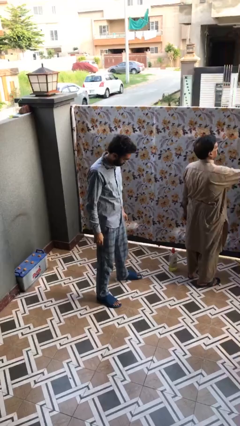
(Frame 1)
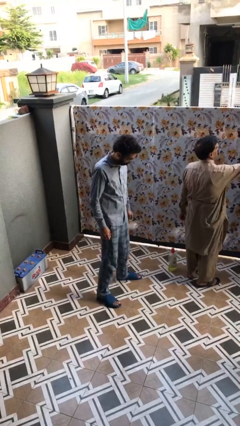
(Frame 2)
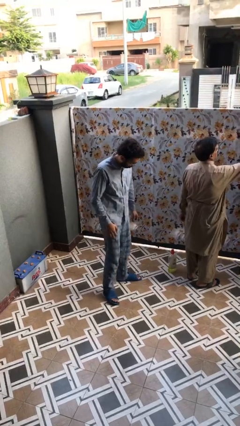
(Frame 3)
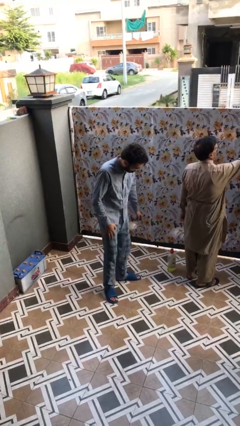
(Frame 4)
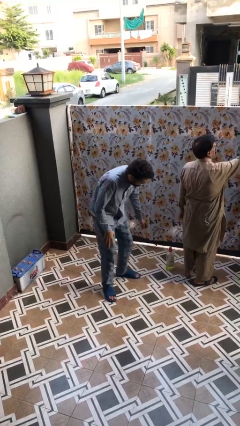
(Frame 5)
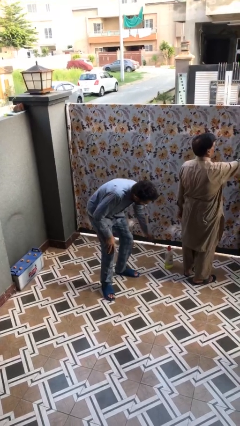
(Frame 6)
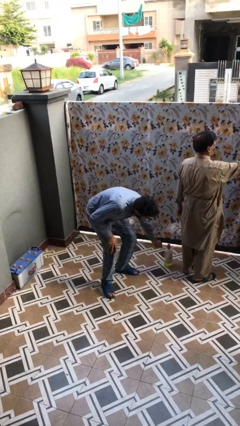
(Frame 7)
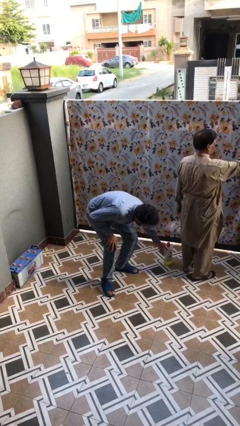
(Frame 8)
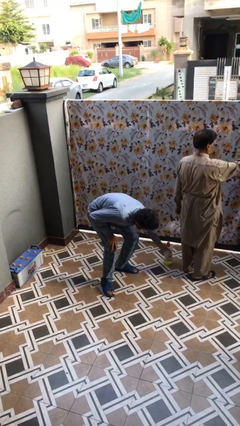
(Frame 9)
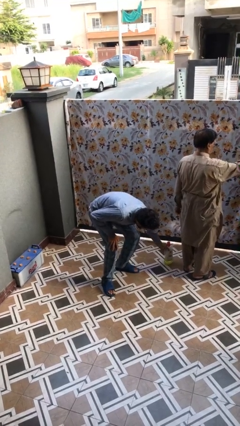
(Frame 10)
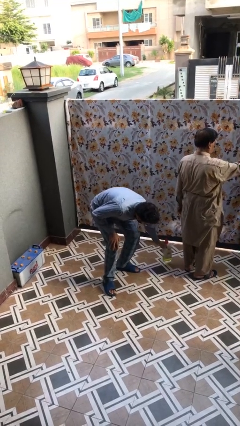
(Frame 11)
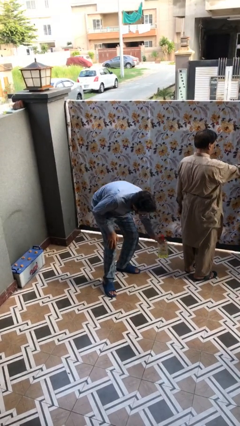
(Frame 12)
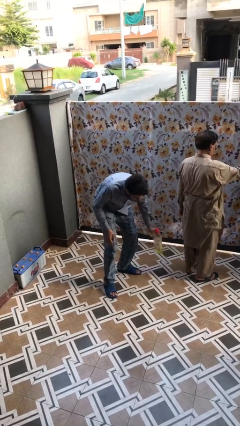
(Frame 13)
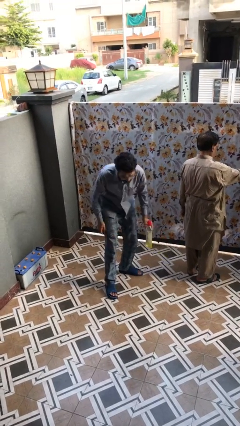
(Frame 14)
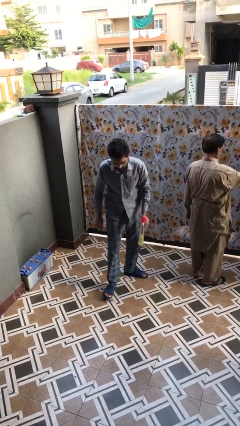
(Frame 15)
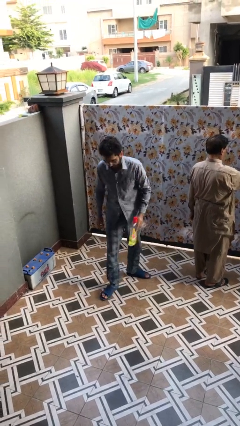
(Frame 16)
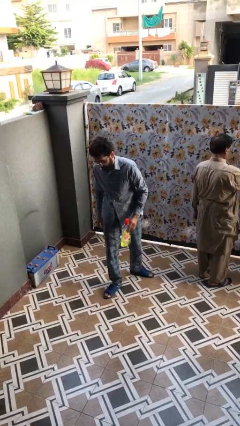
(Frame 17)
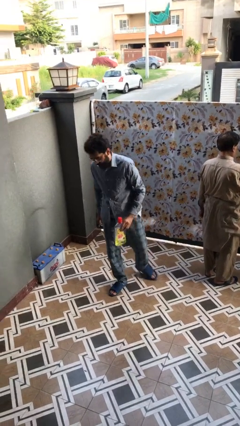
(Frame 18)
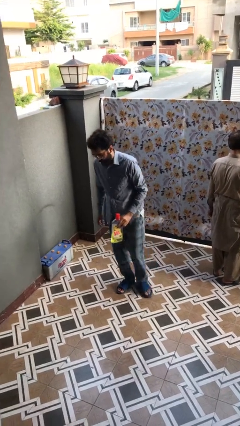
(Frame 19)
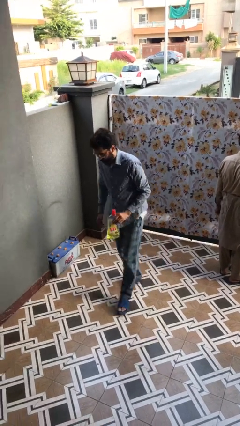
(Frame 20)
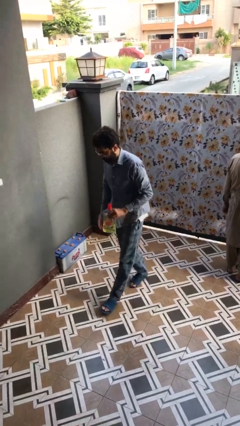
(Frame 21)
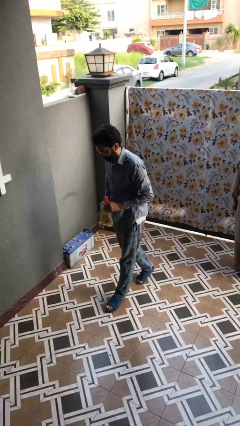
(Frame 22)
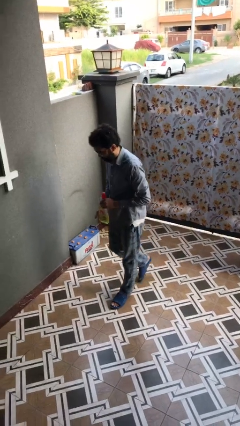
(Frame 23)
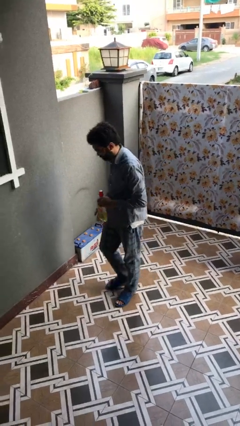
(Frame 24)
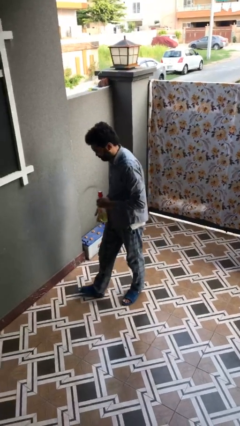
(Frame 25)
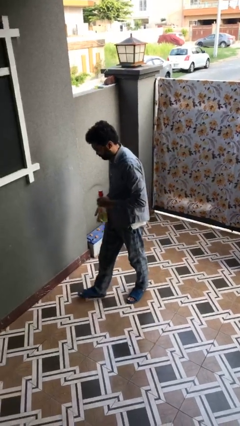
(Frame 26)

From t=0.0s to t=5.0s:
person steals object from person

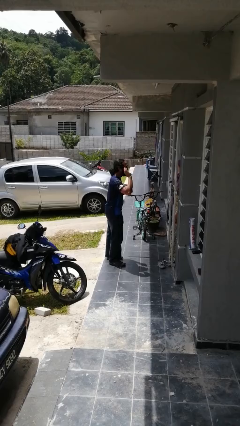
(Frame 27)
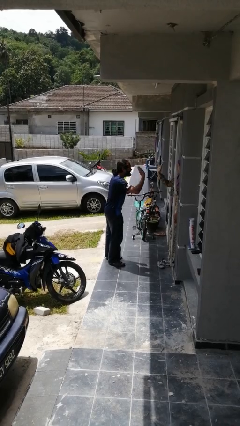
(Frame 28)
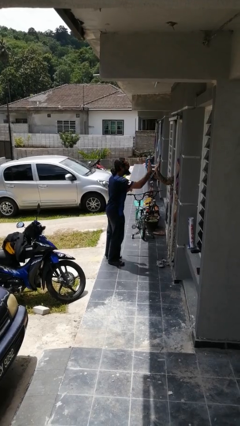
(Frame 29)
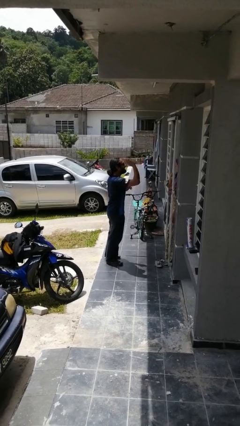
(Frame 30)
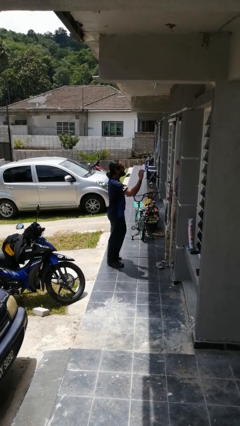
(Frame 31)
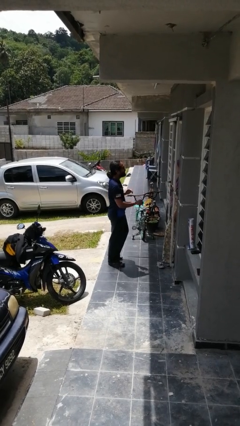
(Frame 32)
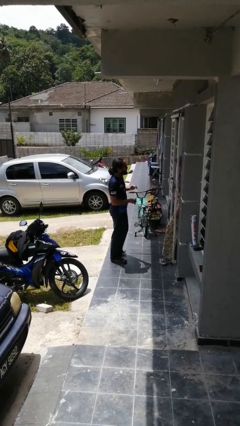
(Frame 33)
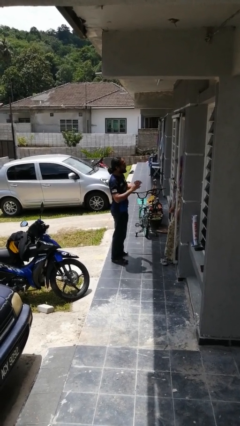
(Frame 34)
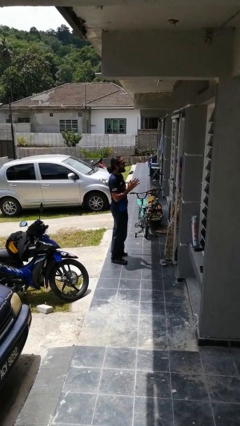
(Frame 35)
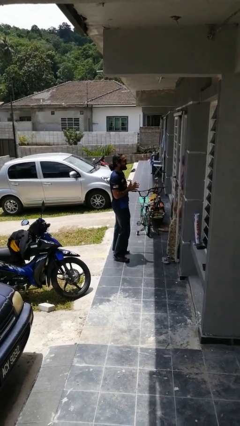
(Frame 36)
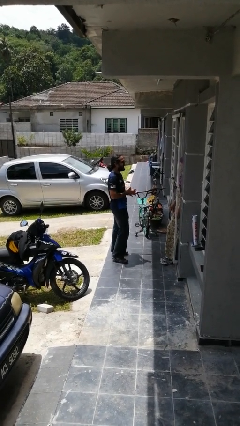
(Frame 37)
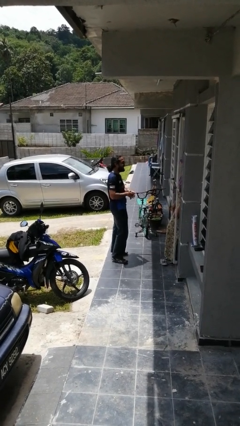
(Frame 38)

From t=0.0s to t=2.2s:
person highfives hand

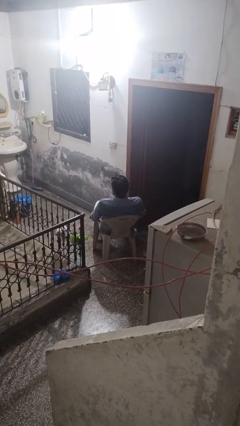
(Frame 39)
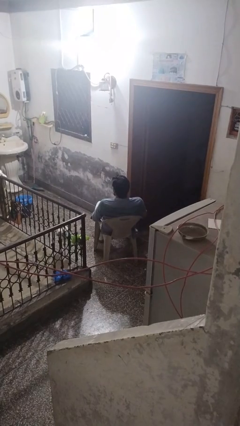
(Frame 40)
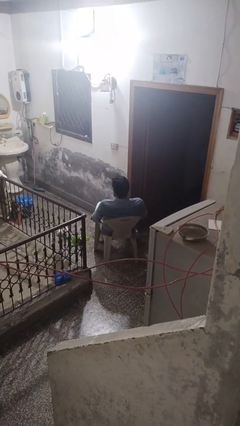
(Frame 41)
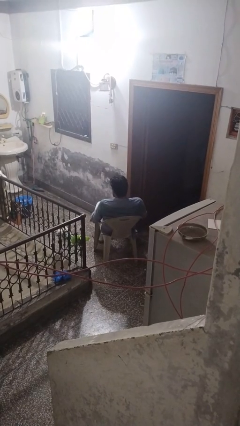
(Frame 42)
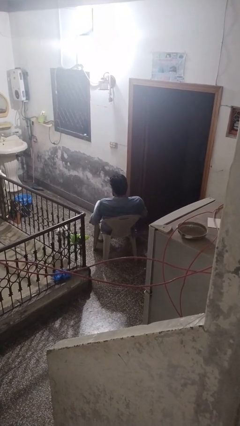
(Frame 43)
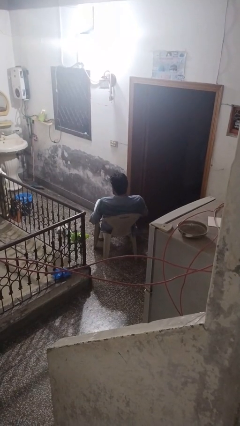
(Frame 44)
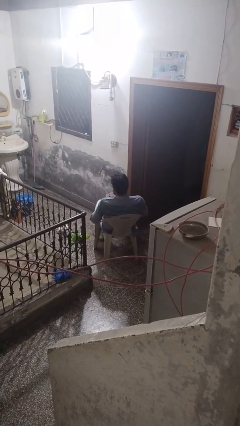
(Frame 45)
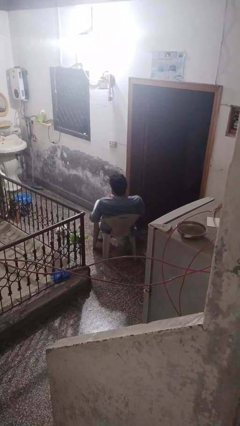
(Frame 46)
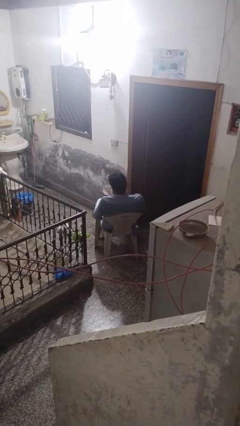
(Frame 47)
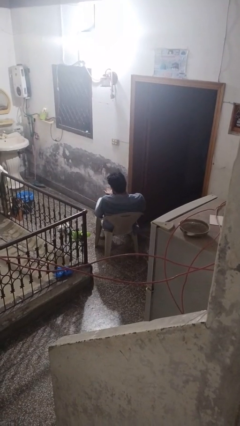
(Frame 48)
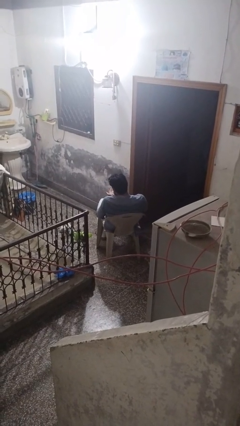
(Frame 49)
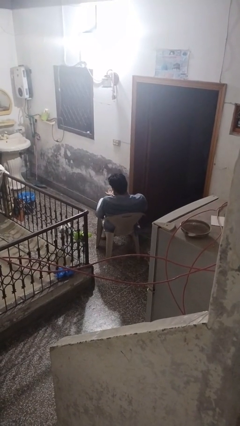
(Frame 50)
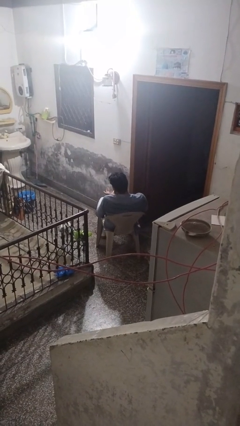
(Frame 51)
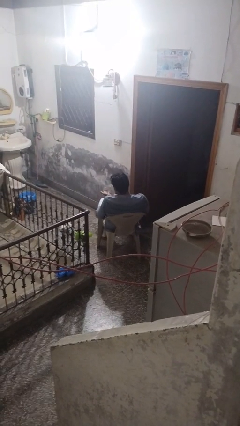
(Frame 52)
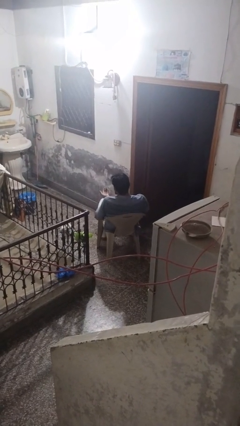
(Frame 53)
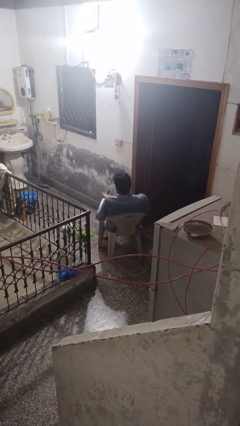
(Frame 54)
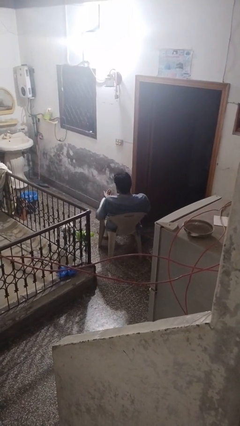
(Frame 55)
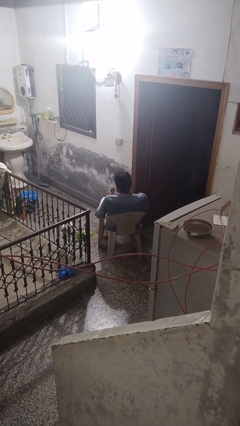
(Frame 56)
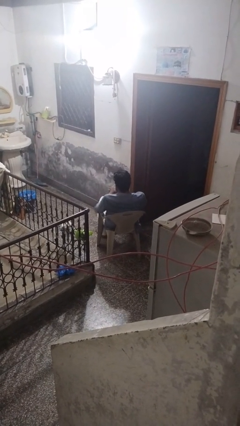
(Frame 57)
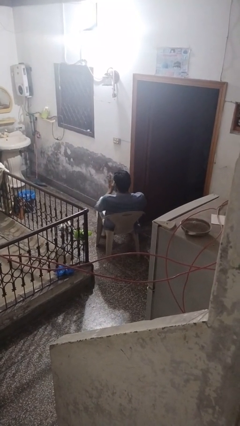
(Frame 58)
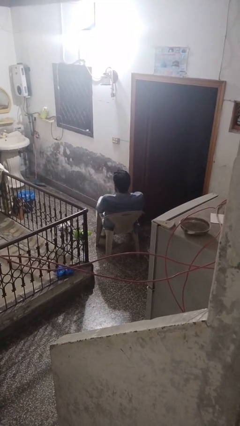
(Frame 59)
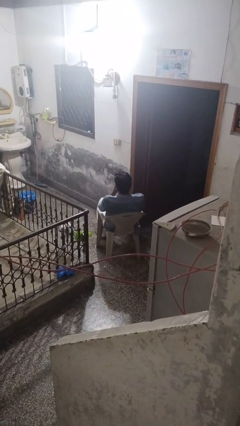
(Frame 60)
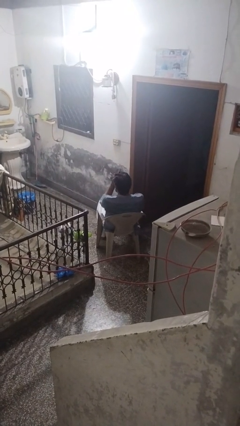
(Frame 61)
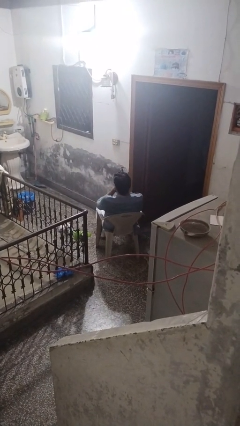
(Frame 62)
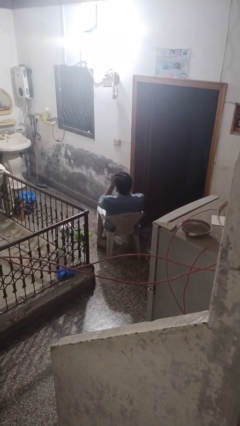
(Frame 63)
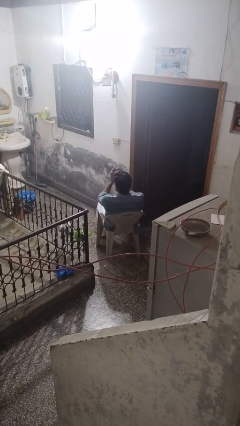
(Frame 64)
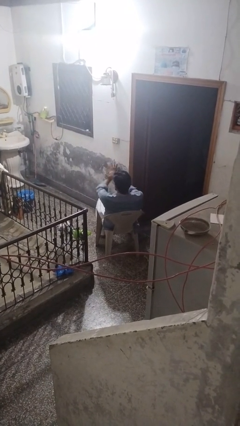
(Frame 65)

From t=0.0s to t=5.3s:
person applies sunscreen

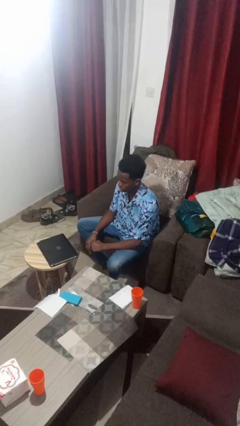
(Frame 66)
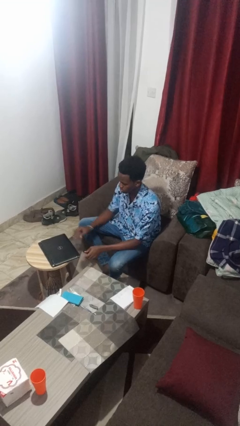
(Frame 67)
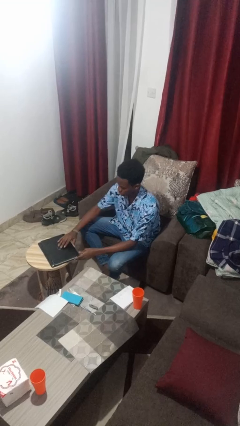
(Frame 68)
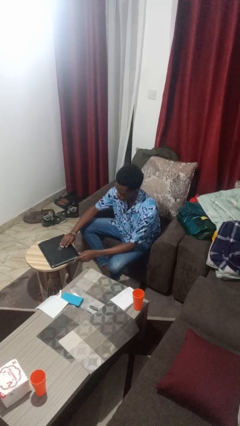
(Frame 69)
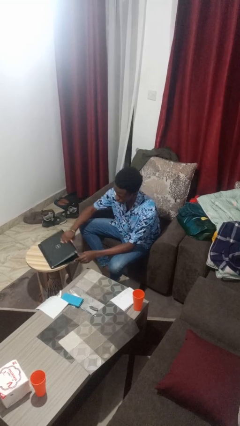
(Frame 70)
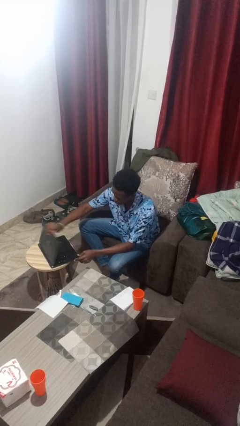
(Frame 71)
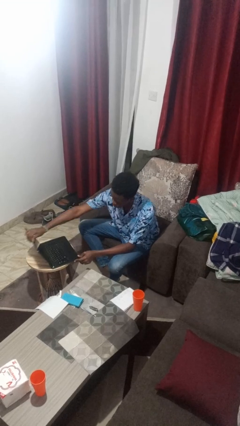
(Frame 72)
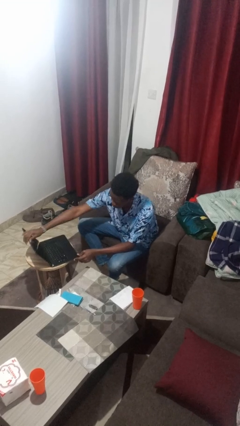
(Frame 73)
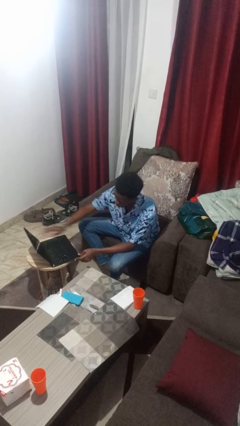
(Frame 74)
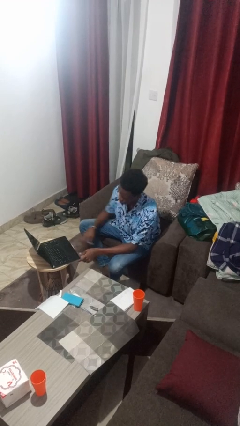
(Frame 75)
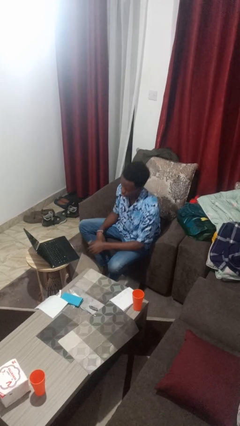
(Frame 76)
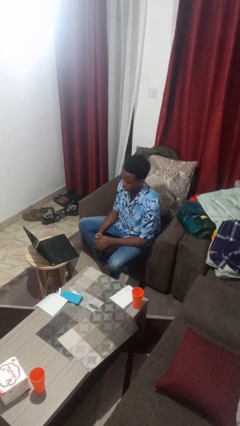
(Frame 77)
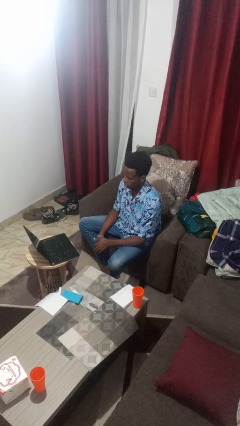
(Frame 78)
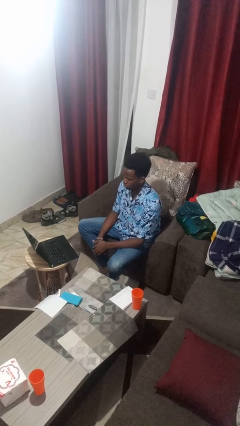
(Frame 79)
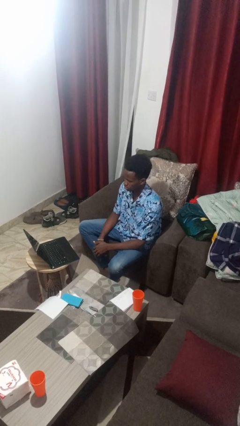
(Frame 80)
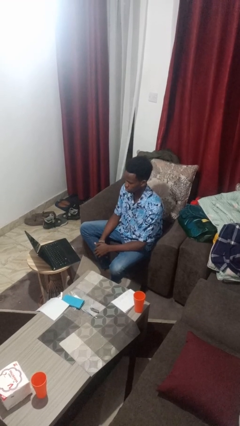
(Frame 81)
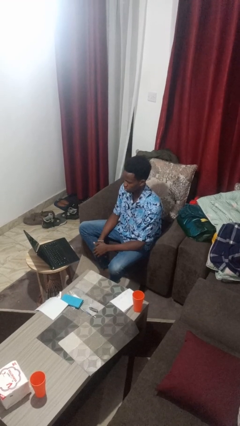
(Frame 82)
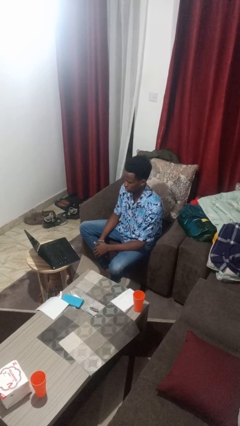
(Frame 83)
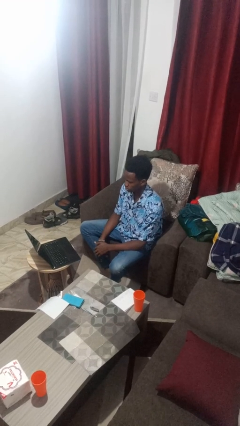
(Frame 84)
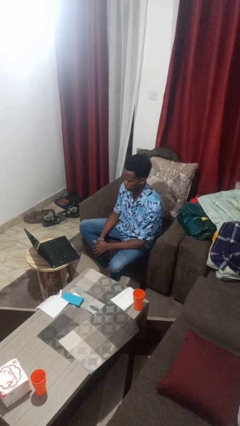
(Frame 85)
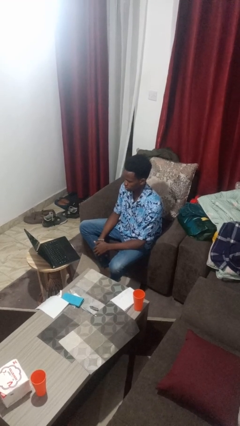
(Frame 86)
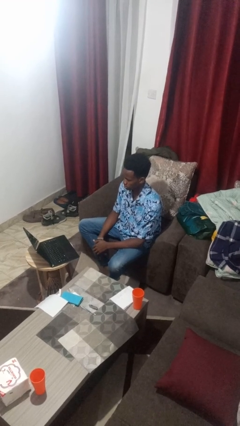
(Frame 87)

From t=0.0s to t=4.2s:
person opens laptop

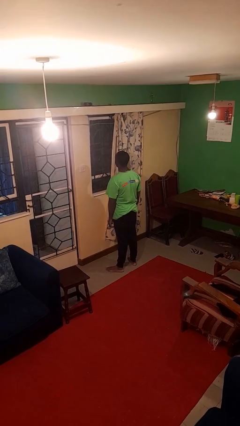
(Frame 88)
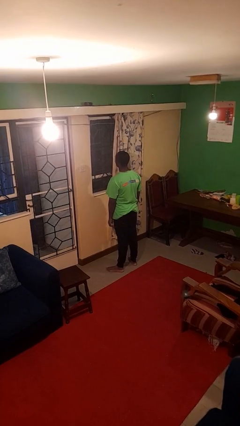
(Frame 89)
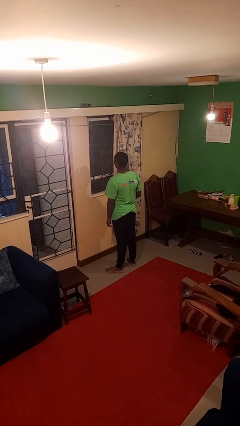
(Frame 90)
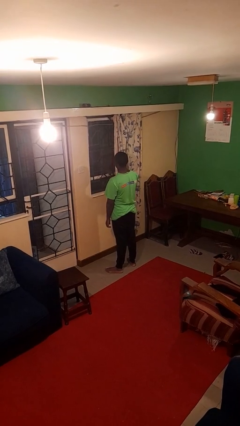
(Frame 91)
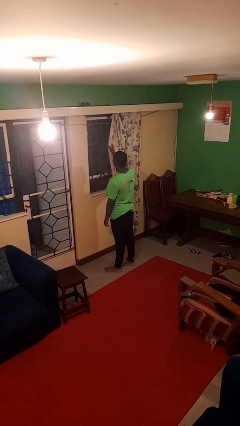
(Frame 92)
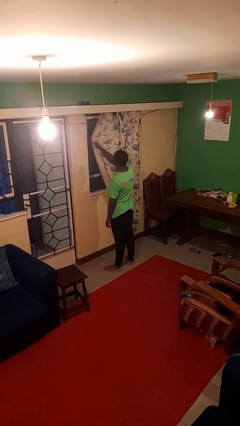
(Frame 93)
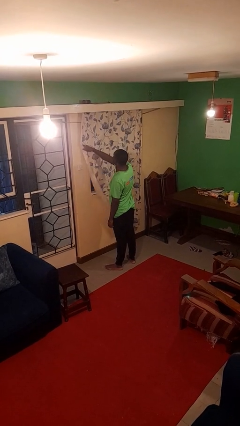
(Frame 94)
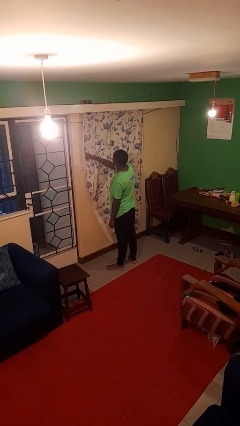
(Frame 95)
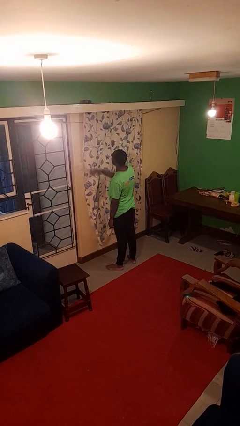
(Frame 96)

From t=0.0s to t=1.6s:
person closes curtains
